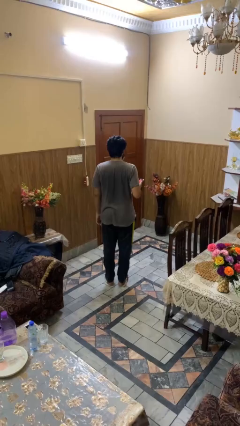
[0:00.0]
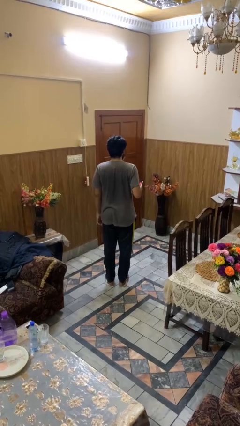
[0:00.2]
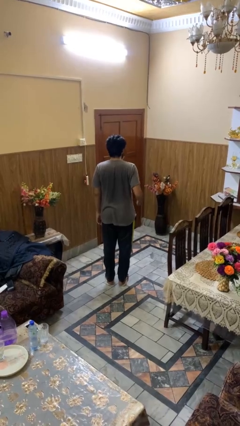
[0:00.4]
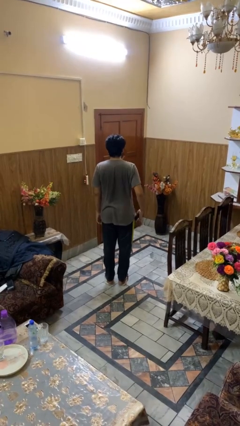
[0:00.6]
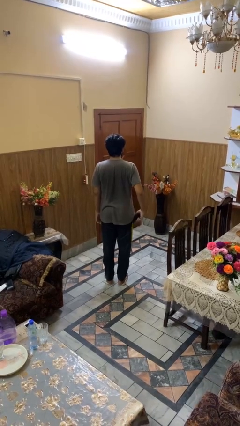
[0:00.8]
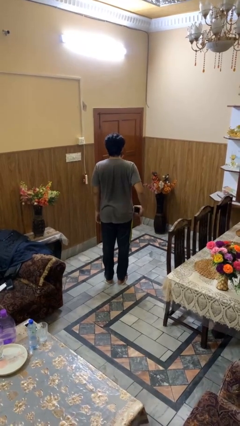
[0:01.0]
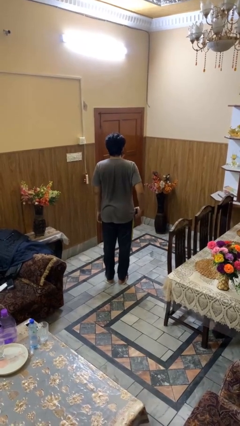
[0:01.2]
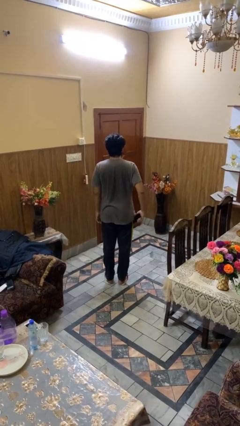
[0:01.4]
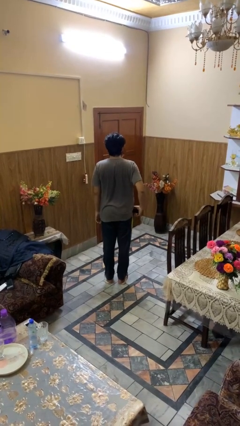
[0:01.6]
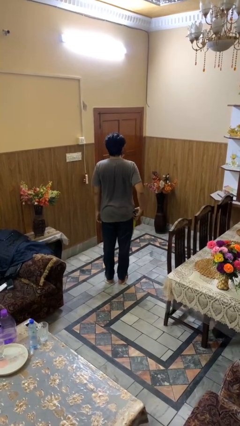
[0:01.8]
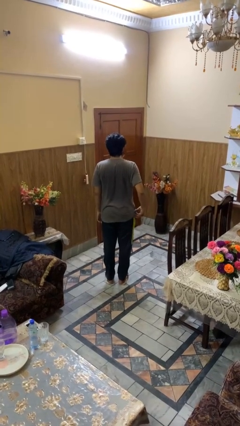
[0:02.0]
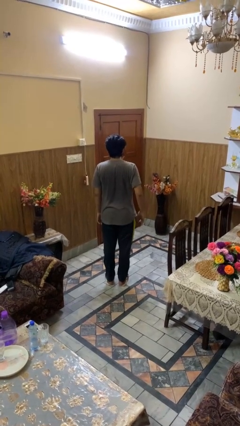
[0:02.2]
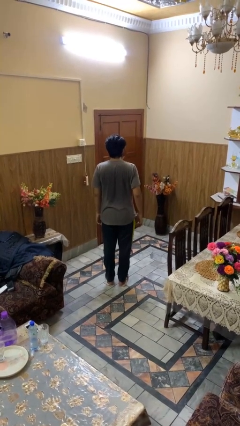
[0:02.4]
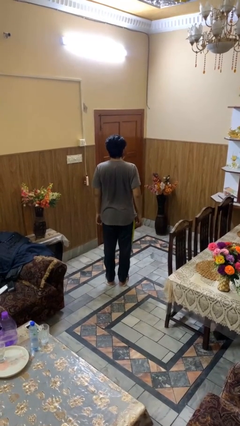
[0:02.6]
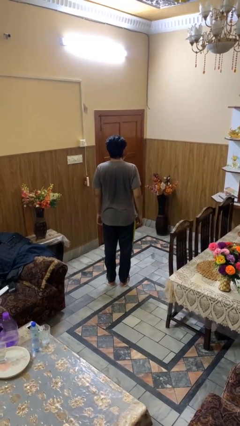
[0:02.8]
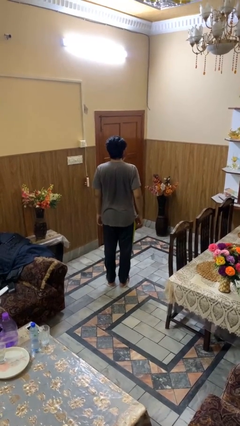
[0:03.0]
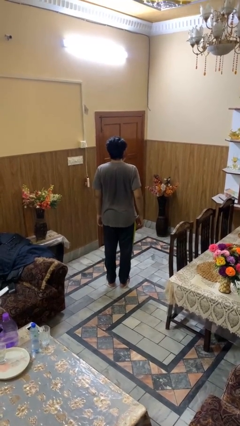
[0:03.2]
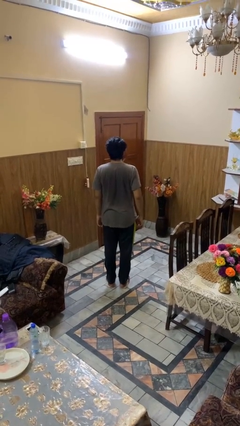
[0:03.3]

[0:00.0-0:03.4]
person puts phone into pocket

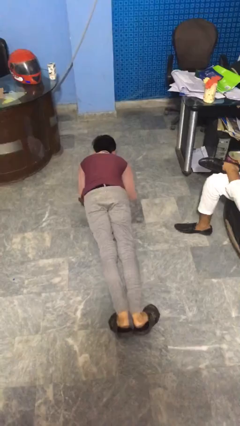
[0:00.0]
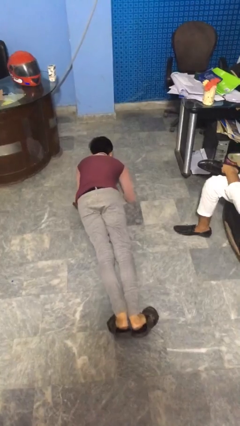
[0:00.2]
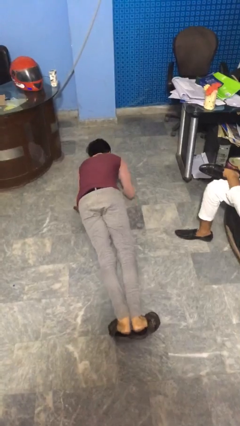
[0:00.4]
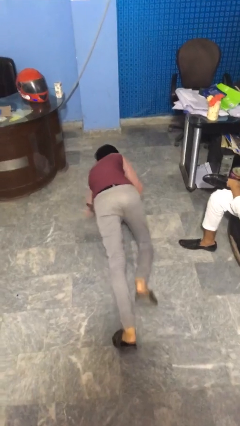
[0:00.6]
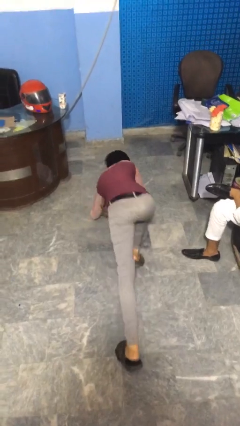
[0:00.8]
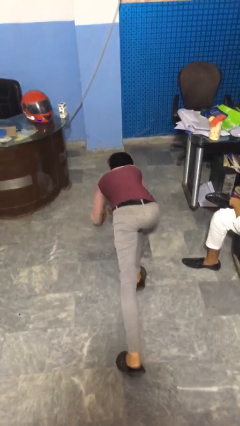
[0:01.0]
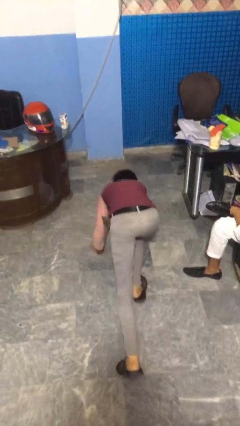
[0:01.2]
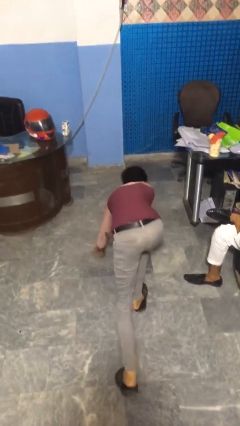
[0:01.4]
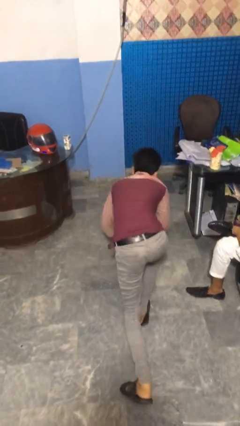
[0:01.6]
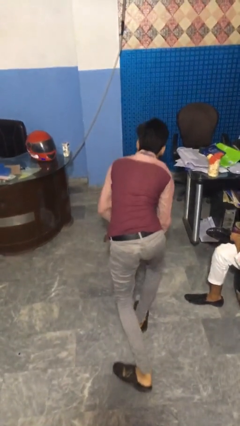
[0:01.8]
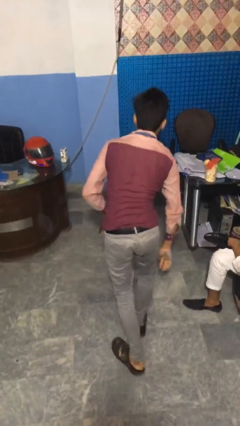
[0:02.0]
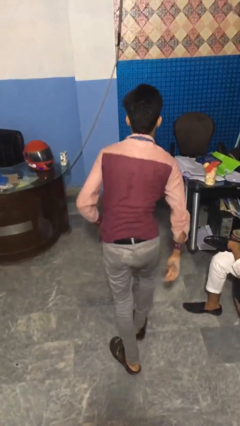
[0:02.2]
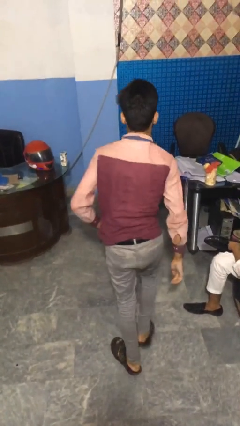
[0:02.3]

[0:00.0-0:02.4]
person stands up from floor

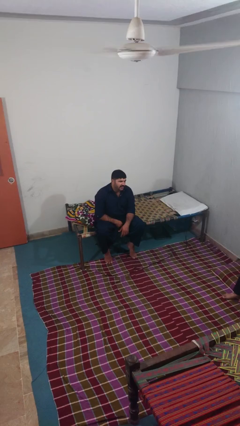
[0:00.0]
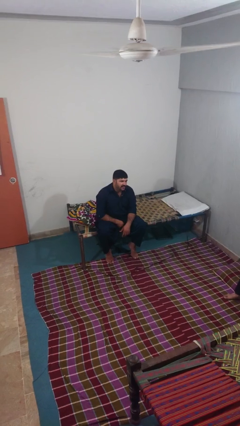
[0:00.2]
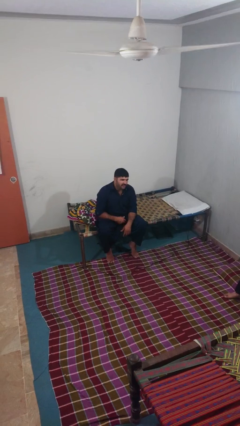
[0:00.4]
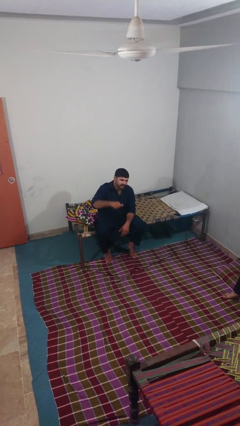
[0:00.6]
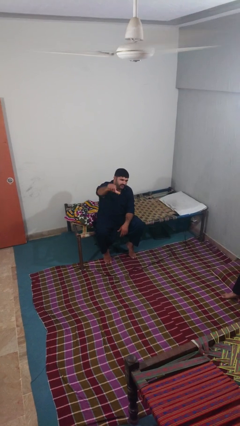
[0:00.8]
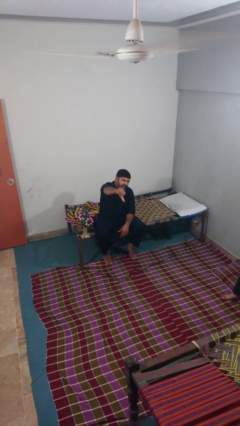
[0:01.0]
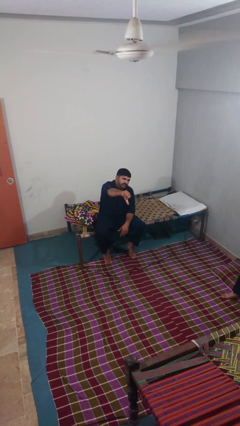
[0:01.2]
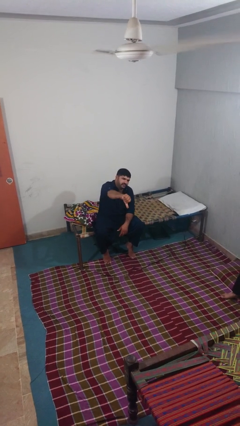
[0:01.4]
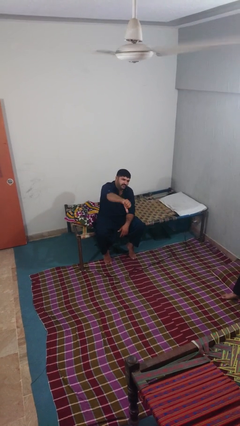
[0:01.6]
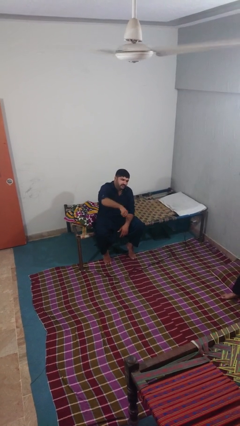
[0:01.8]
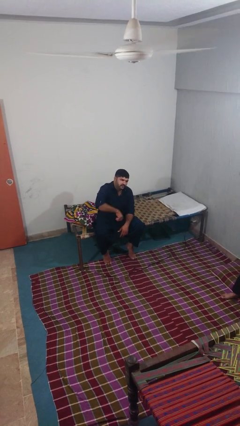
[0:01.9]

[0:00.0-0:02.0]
person gestures thumbs down

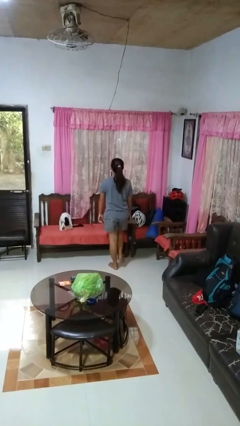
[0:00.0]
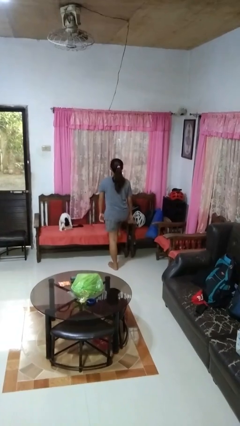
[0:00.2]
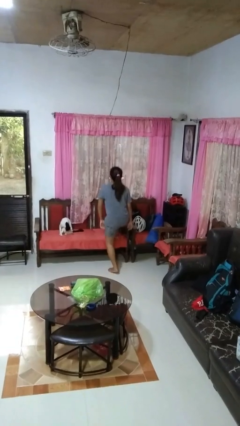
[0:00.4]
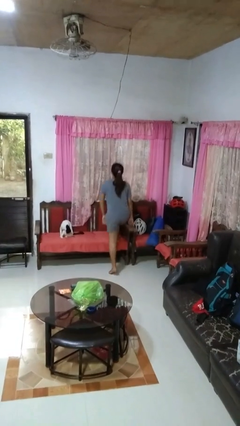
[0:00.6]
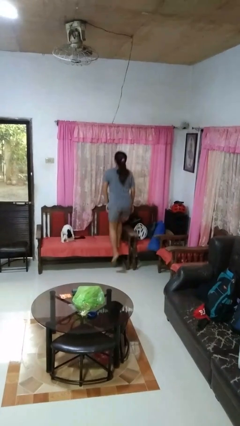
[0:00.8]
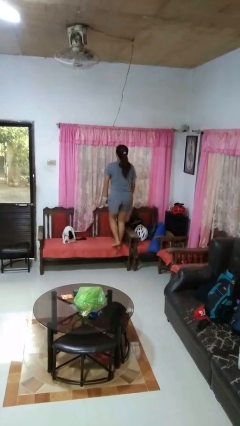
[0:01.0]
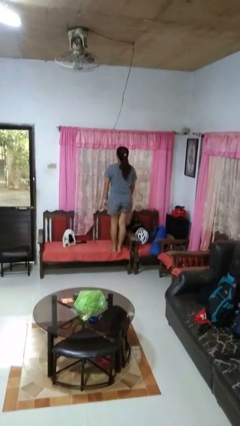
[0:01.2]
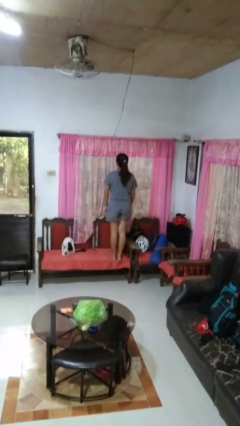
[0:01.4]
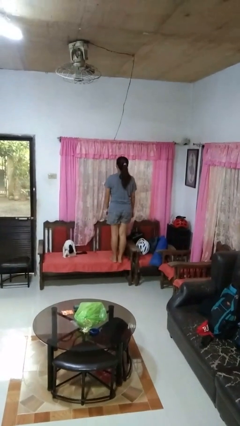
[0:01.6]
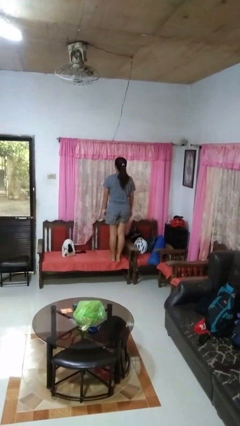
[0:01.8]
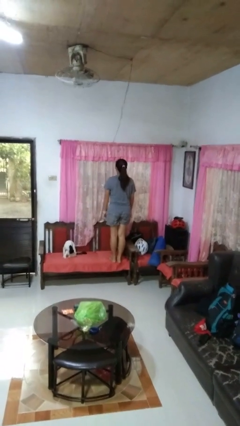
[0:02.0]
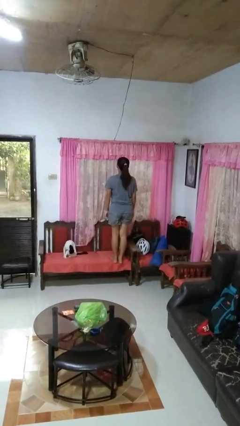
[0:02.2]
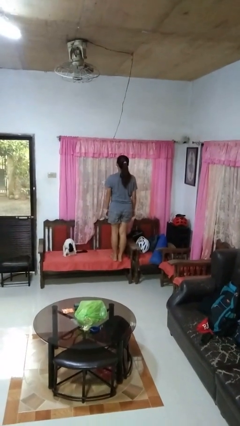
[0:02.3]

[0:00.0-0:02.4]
person climbs on chair

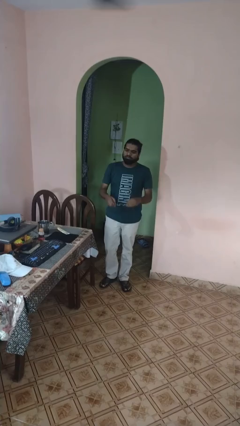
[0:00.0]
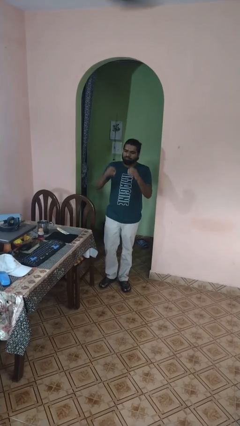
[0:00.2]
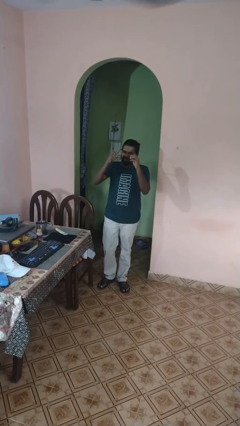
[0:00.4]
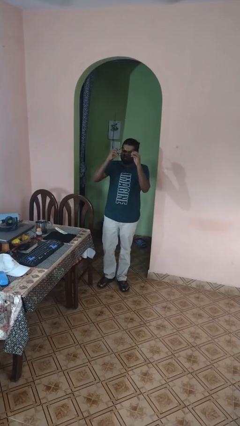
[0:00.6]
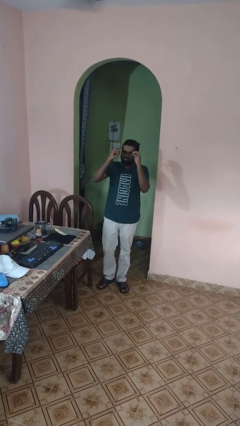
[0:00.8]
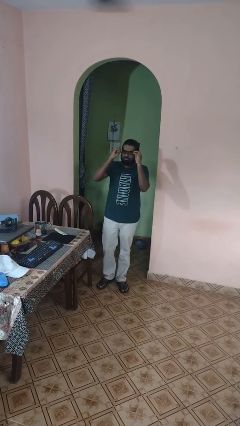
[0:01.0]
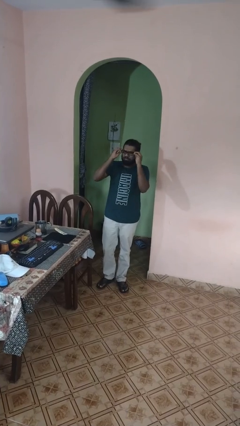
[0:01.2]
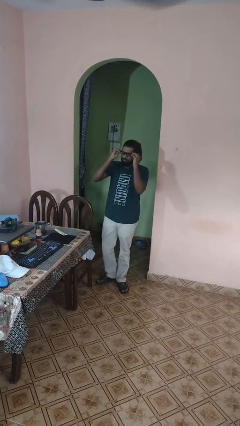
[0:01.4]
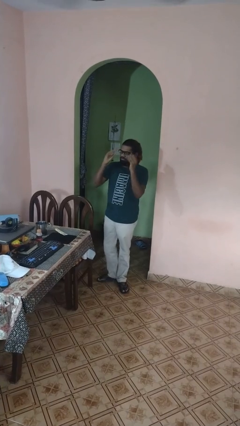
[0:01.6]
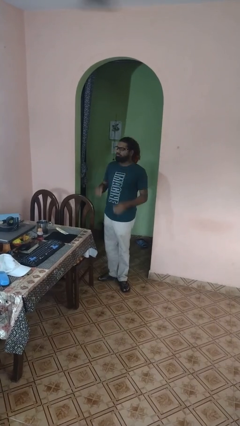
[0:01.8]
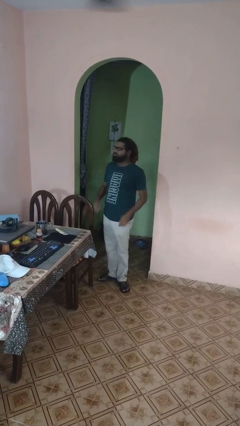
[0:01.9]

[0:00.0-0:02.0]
person puts on glasses

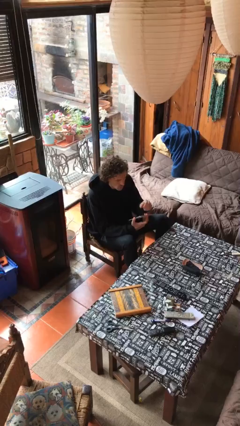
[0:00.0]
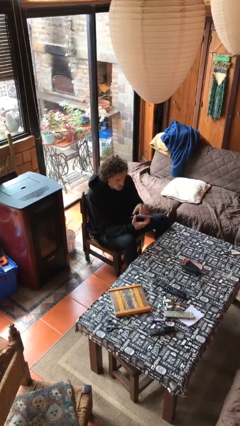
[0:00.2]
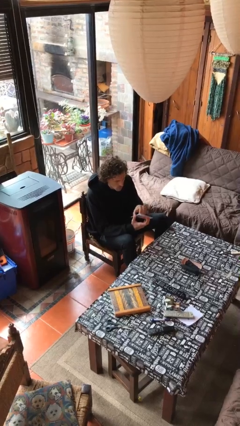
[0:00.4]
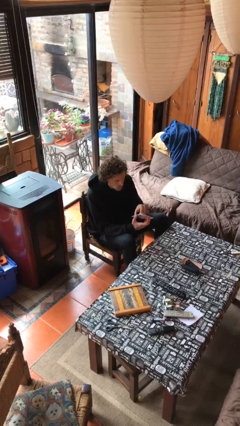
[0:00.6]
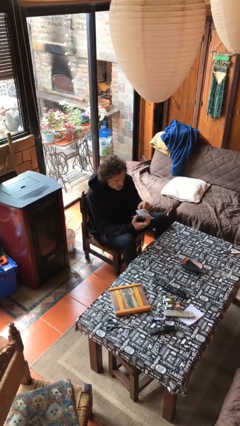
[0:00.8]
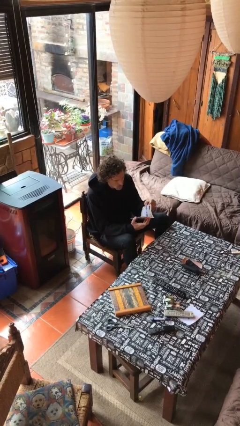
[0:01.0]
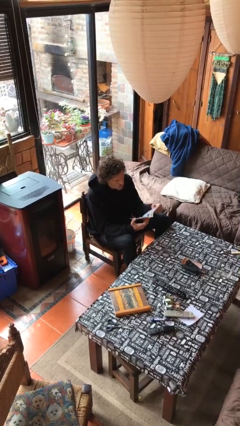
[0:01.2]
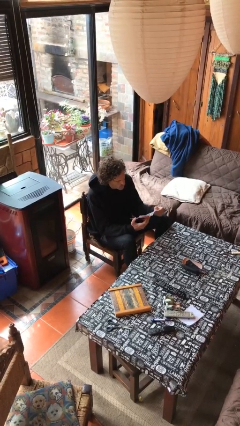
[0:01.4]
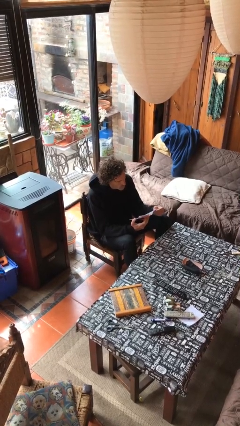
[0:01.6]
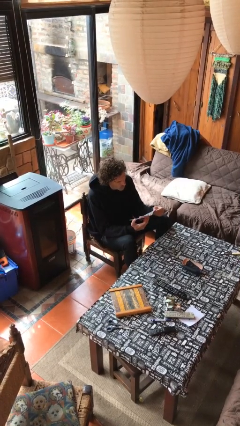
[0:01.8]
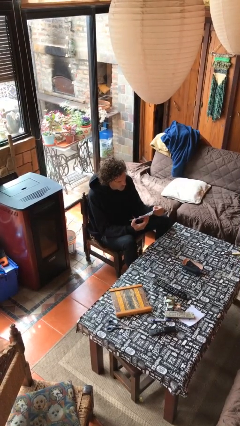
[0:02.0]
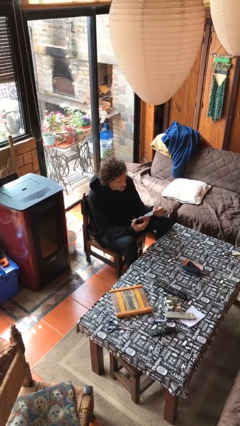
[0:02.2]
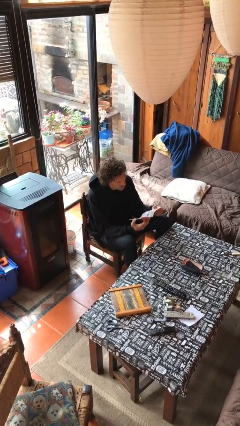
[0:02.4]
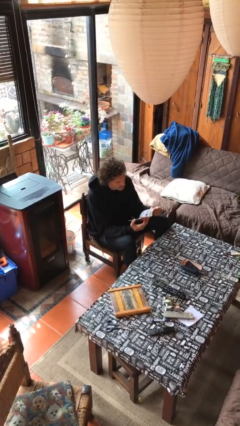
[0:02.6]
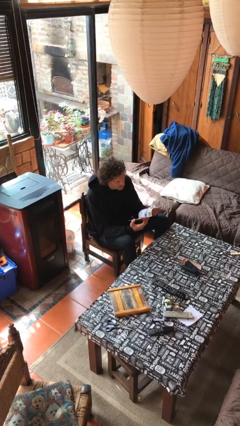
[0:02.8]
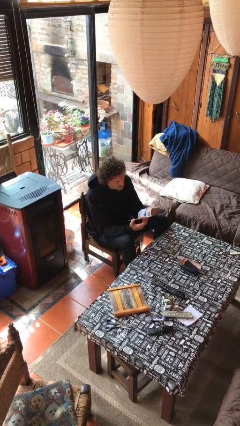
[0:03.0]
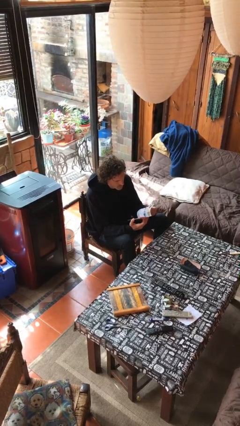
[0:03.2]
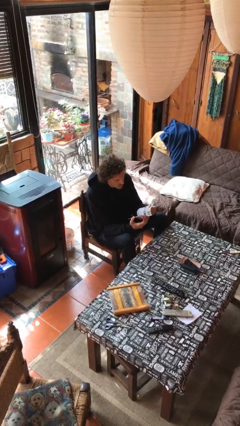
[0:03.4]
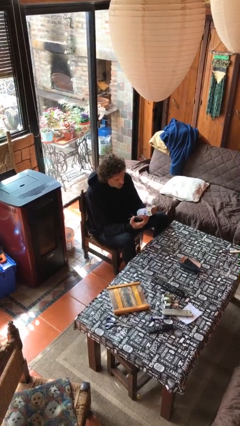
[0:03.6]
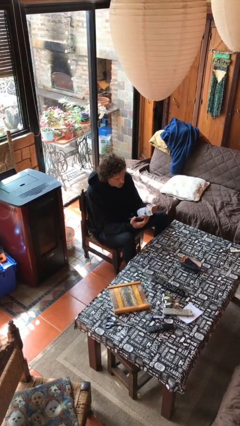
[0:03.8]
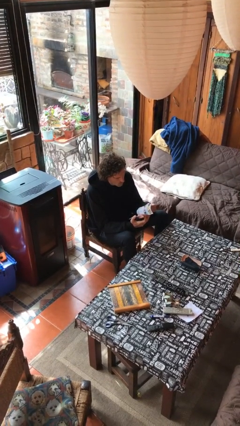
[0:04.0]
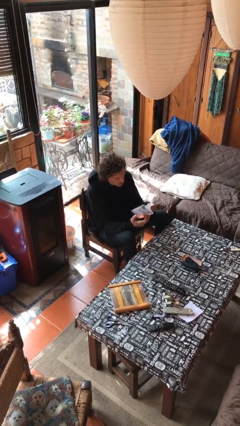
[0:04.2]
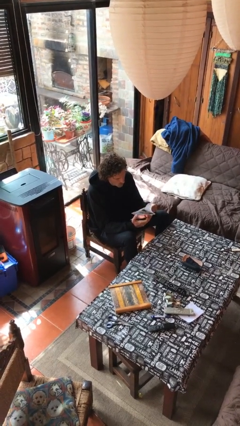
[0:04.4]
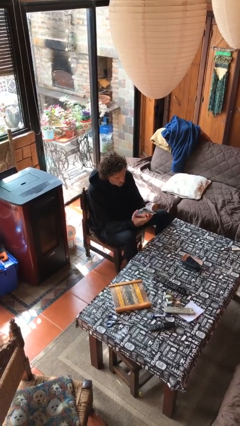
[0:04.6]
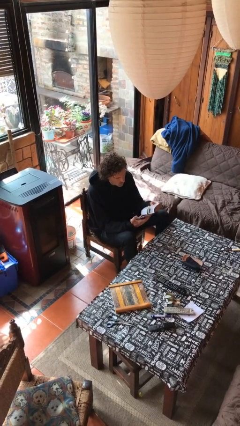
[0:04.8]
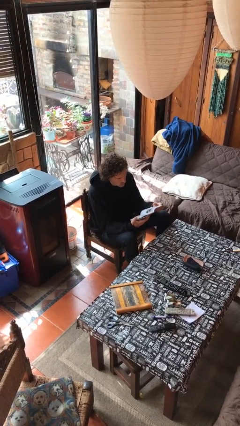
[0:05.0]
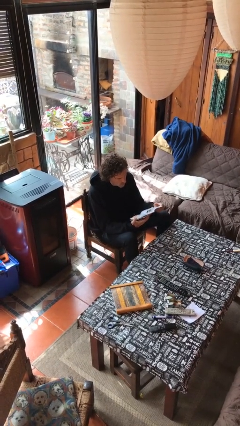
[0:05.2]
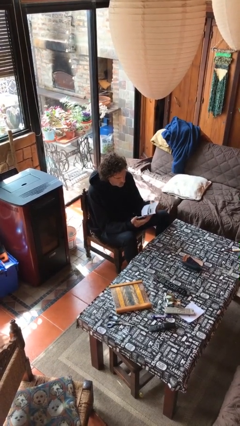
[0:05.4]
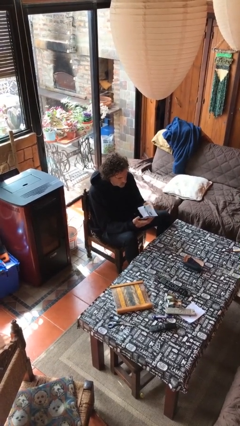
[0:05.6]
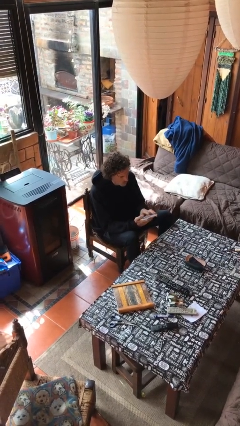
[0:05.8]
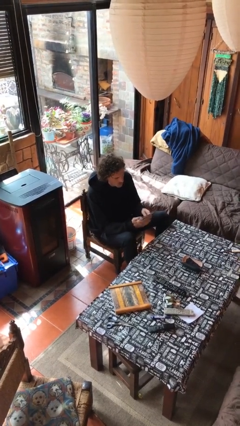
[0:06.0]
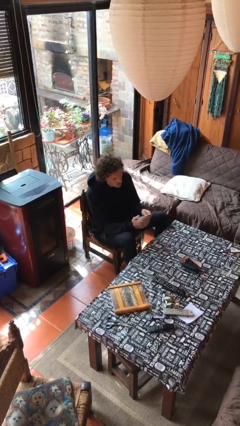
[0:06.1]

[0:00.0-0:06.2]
person reads document
